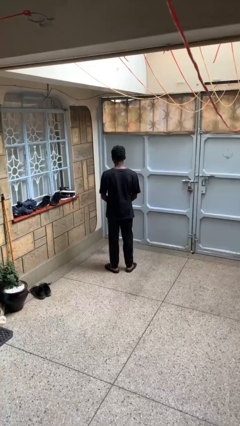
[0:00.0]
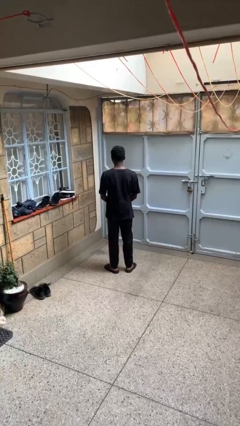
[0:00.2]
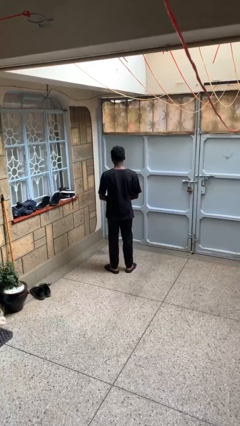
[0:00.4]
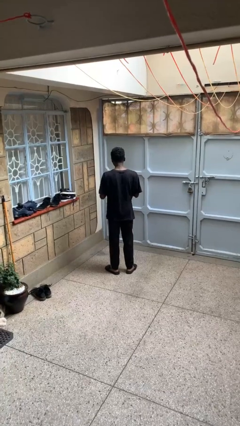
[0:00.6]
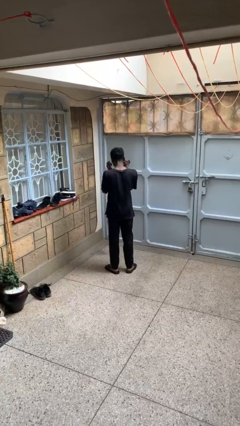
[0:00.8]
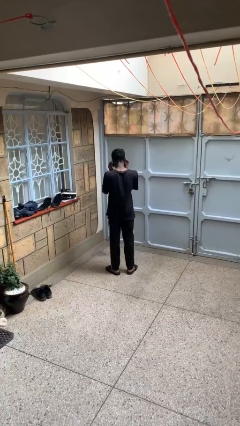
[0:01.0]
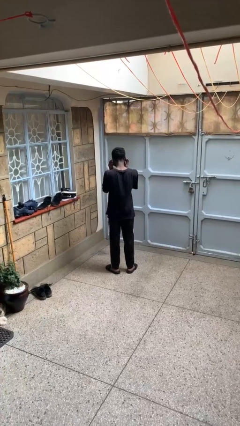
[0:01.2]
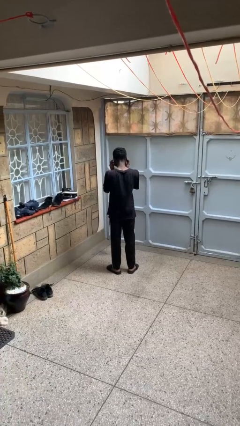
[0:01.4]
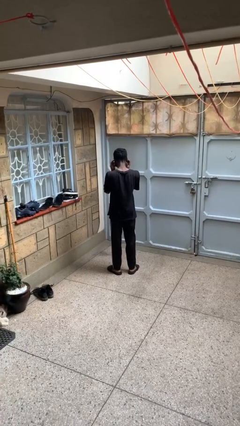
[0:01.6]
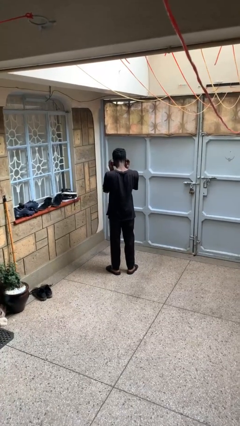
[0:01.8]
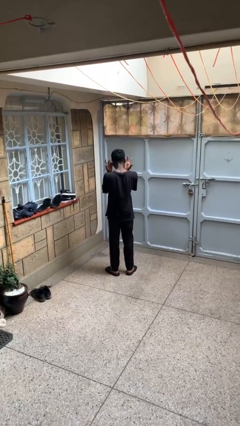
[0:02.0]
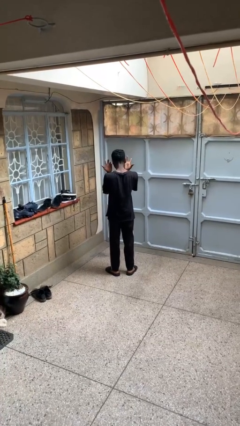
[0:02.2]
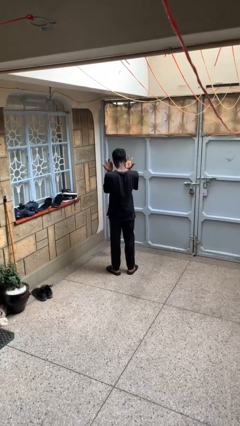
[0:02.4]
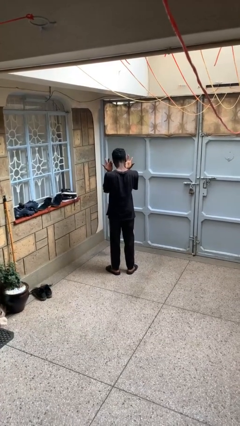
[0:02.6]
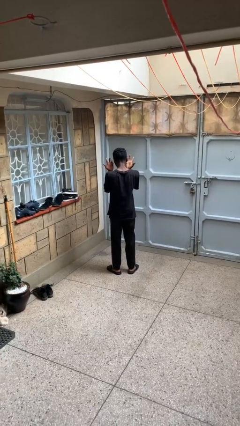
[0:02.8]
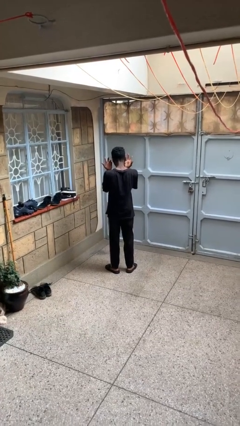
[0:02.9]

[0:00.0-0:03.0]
person puts fingers in ear

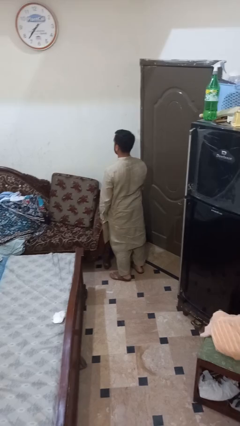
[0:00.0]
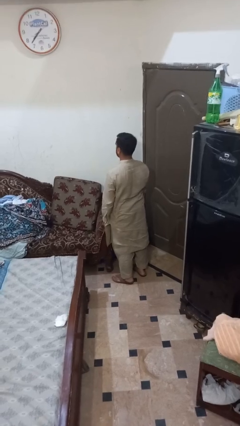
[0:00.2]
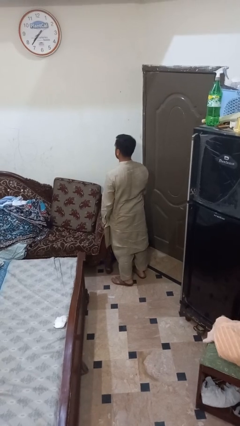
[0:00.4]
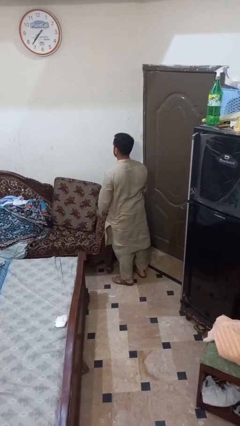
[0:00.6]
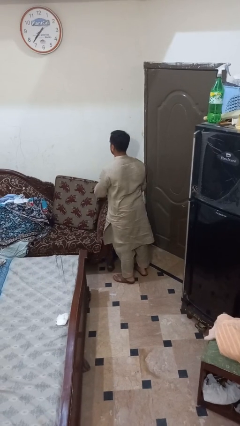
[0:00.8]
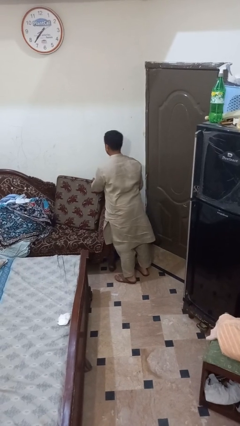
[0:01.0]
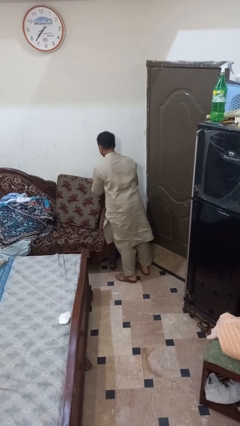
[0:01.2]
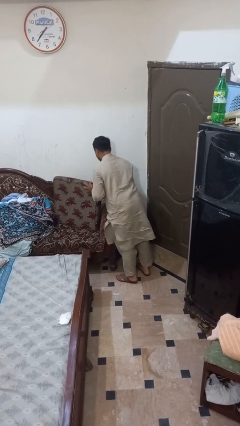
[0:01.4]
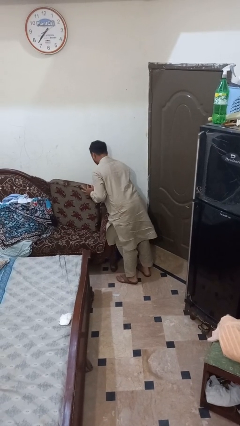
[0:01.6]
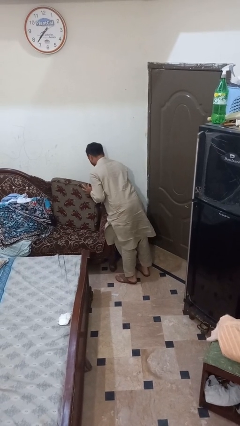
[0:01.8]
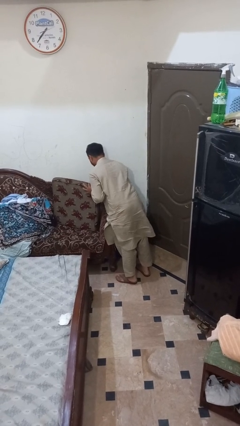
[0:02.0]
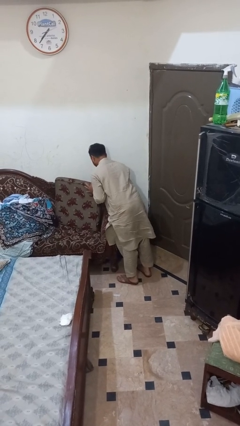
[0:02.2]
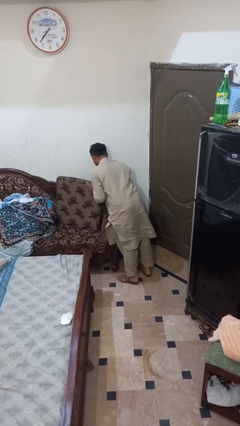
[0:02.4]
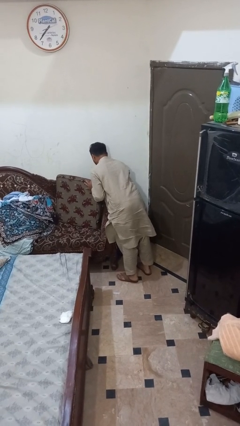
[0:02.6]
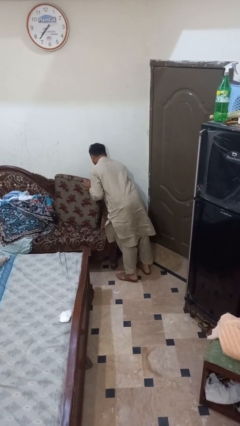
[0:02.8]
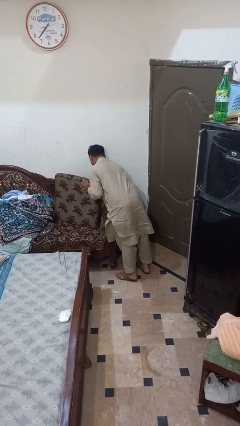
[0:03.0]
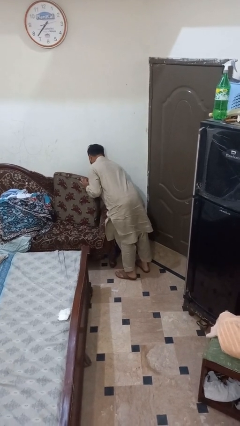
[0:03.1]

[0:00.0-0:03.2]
person searches in couch

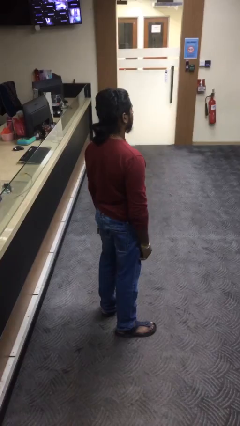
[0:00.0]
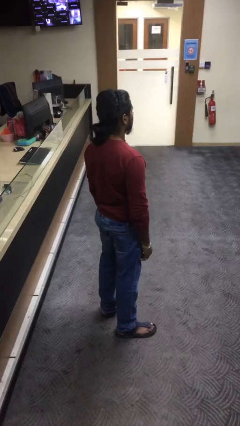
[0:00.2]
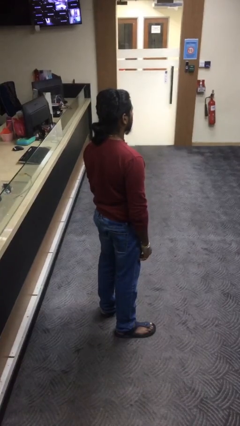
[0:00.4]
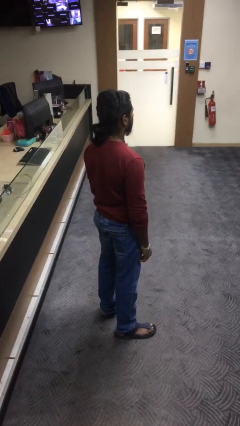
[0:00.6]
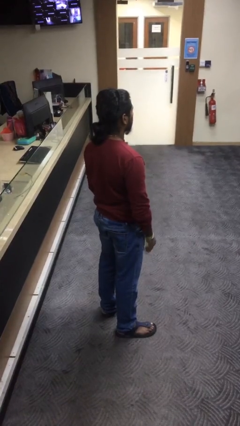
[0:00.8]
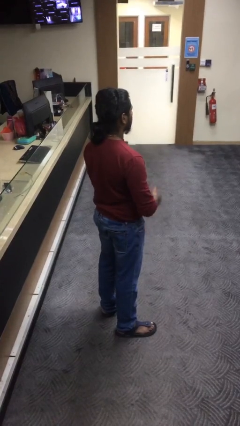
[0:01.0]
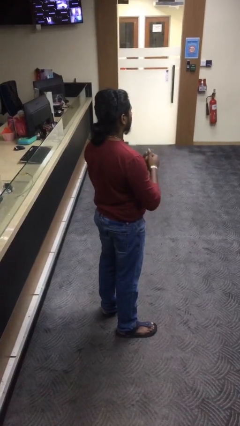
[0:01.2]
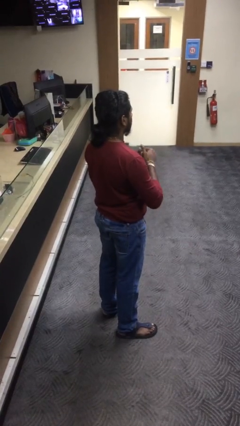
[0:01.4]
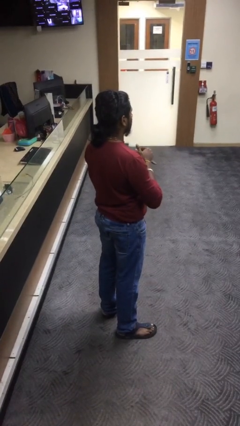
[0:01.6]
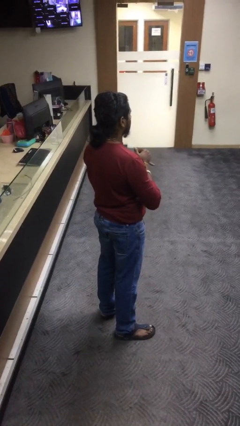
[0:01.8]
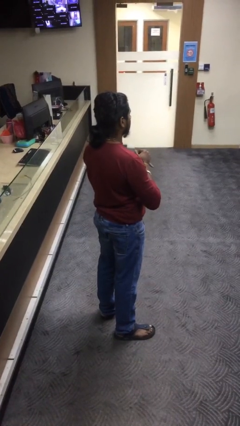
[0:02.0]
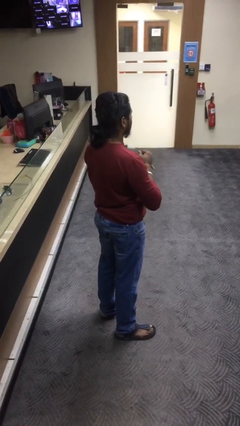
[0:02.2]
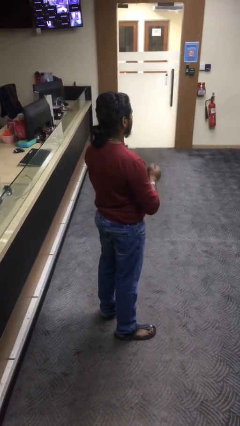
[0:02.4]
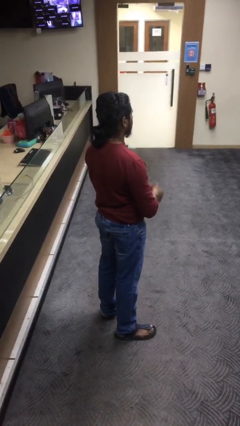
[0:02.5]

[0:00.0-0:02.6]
person cracks knuckles

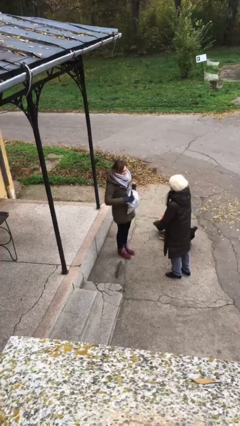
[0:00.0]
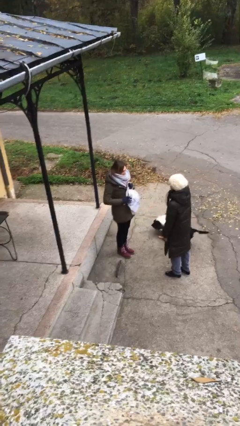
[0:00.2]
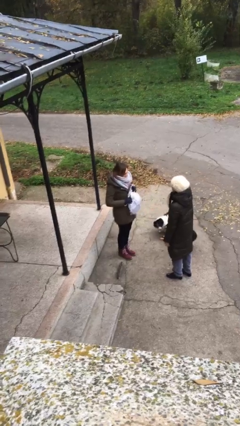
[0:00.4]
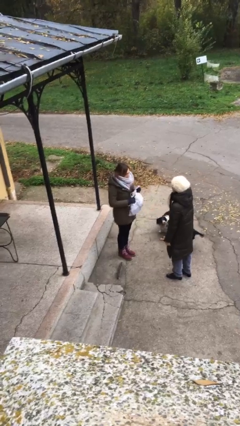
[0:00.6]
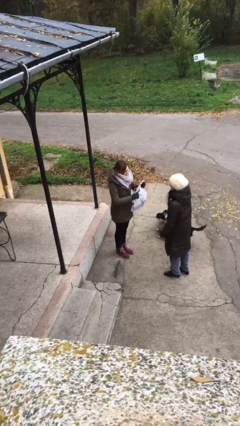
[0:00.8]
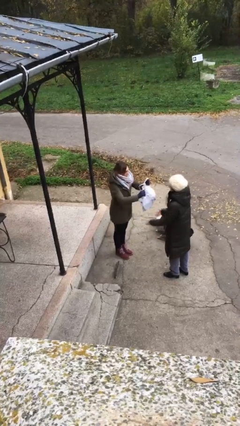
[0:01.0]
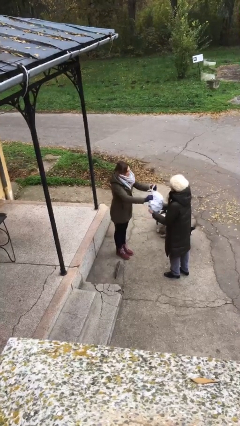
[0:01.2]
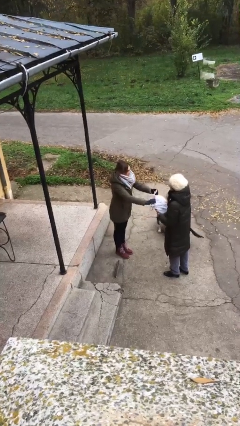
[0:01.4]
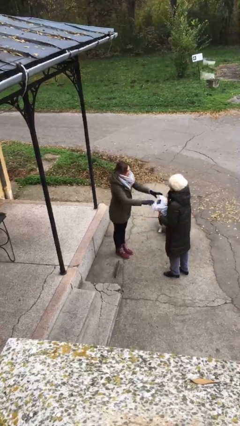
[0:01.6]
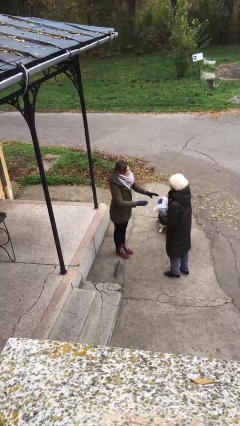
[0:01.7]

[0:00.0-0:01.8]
person transfers object to person

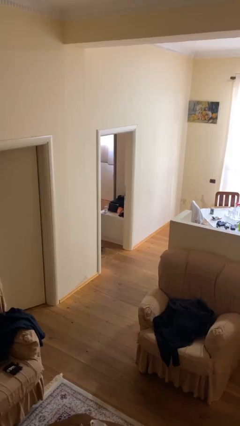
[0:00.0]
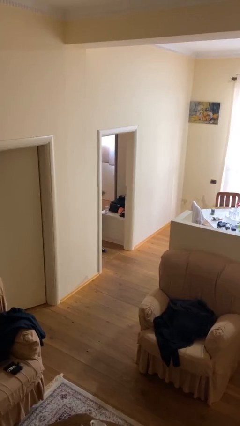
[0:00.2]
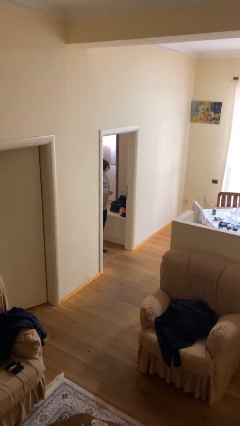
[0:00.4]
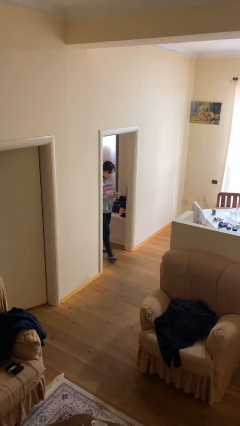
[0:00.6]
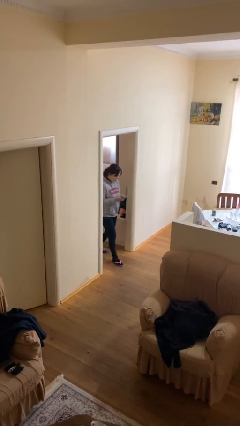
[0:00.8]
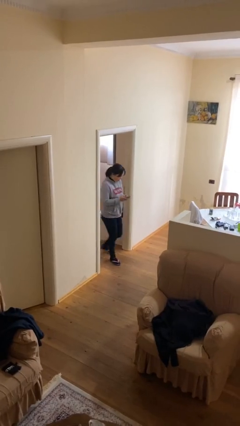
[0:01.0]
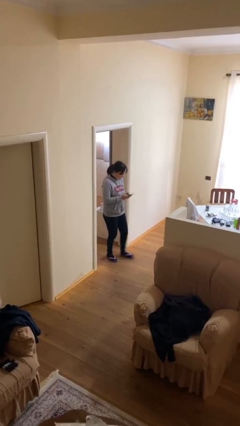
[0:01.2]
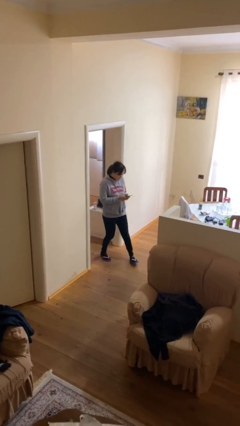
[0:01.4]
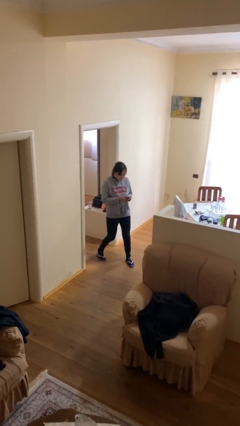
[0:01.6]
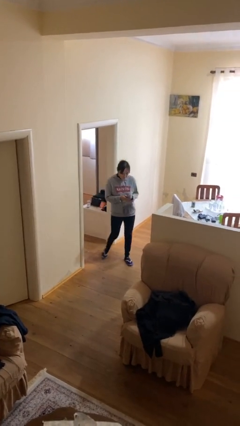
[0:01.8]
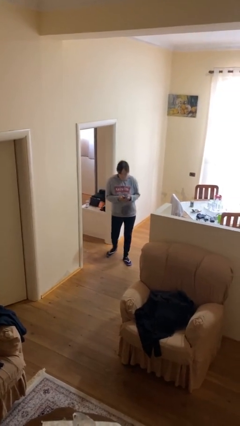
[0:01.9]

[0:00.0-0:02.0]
person enters scene through structure

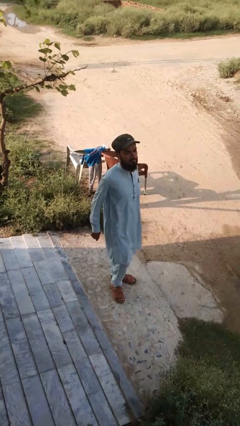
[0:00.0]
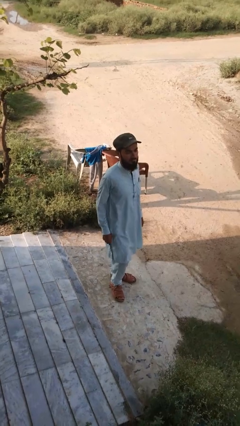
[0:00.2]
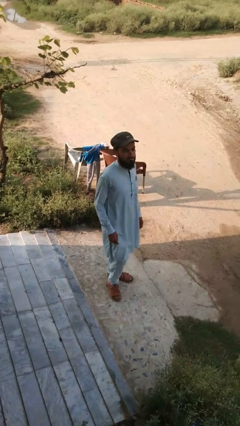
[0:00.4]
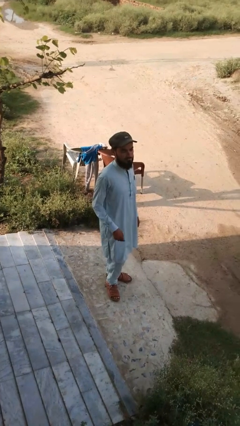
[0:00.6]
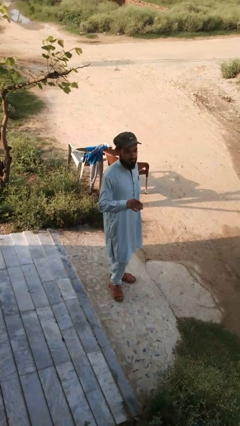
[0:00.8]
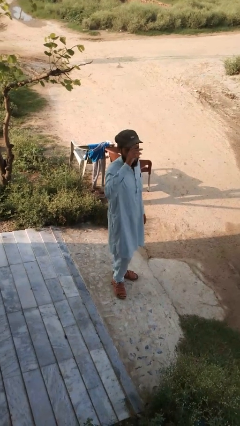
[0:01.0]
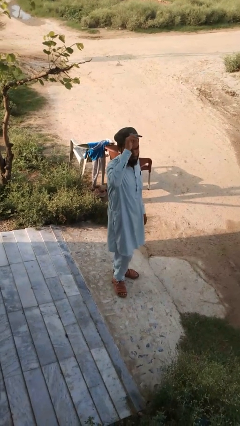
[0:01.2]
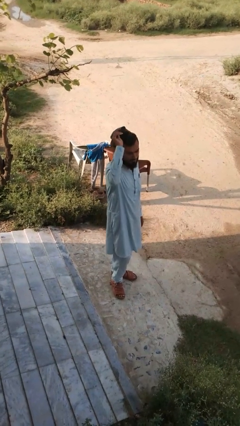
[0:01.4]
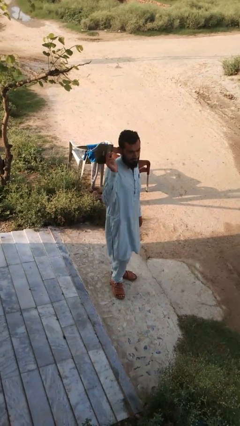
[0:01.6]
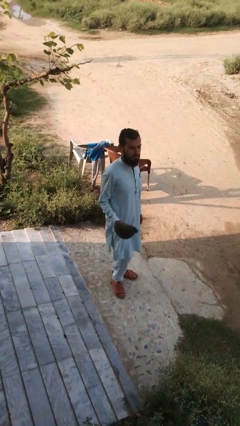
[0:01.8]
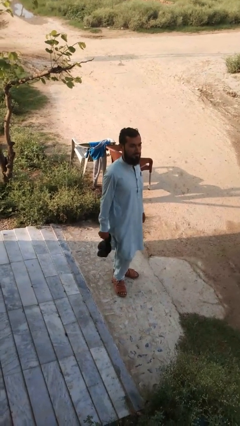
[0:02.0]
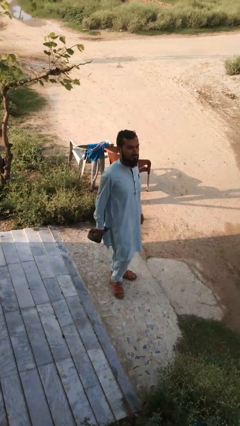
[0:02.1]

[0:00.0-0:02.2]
person takes off hat

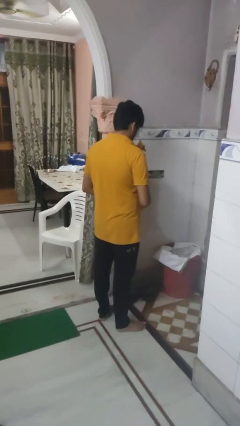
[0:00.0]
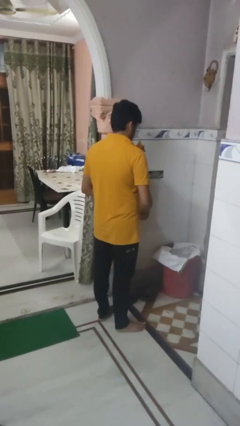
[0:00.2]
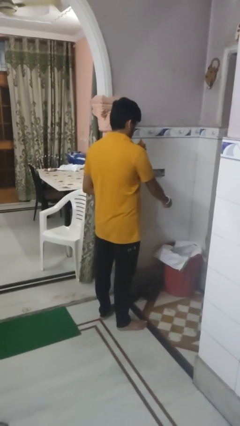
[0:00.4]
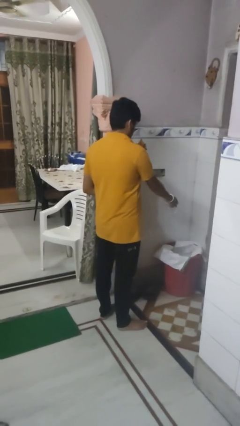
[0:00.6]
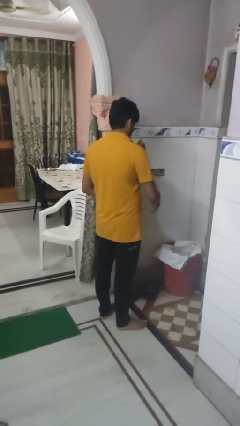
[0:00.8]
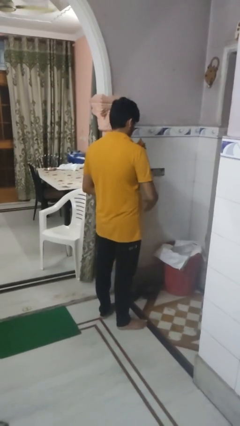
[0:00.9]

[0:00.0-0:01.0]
person discards trash

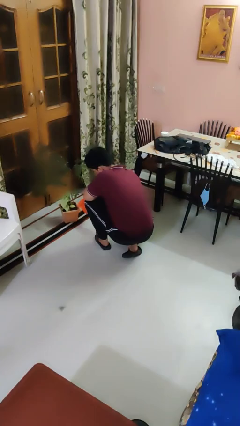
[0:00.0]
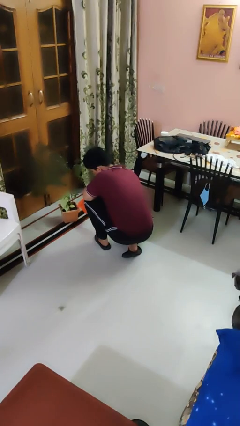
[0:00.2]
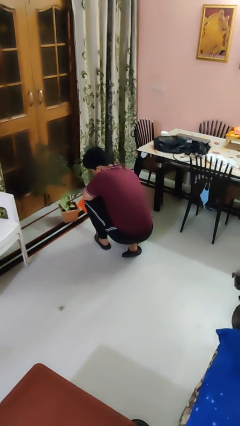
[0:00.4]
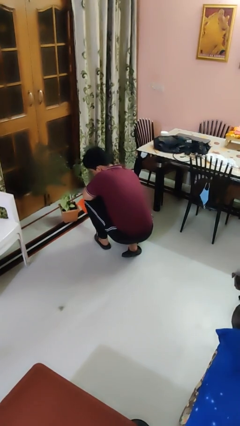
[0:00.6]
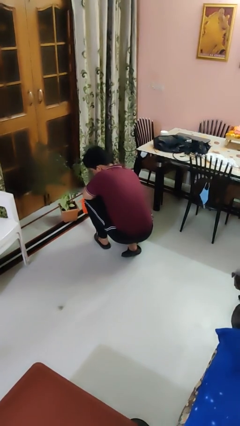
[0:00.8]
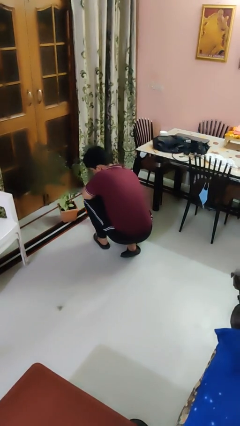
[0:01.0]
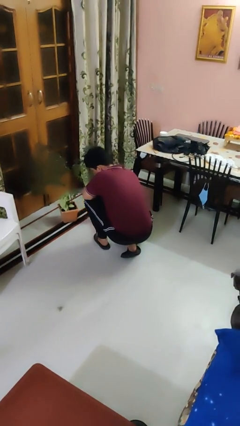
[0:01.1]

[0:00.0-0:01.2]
person waters houseplant
